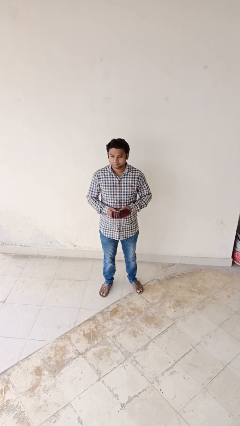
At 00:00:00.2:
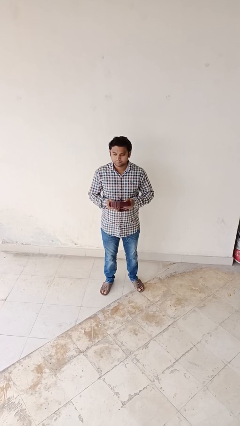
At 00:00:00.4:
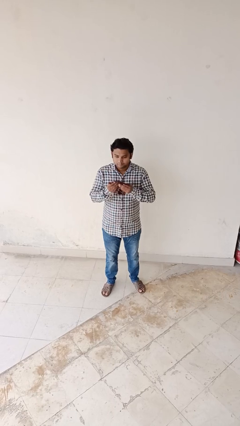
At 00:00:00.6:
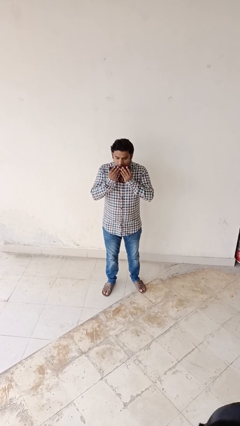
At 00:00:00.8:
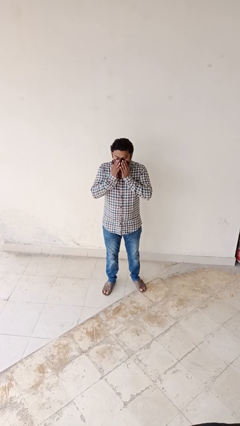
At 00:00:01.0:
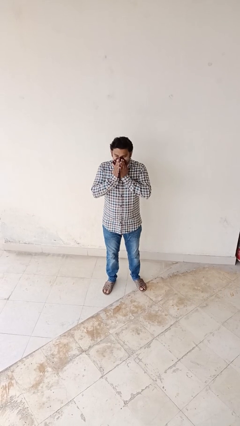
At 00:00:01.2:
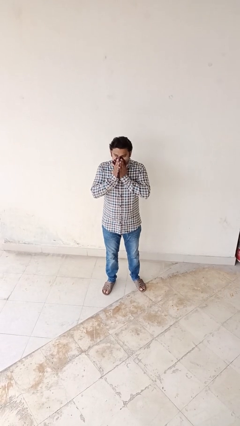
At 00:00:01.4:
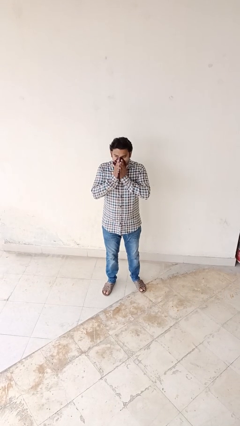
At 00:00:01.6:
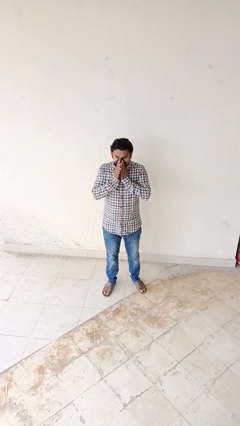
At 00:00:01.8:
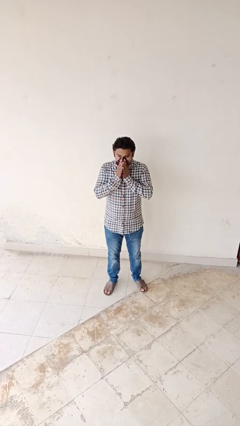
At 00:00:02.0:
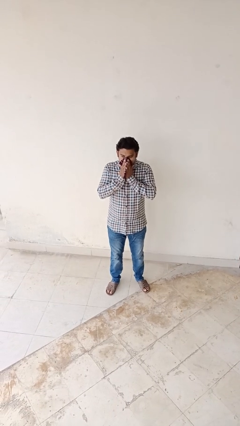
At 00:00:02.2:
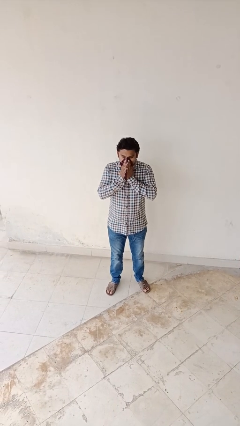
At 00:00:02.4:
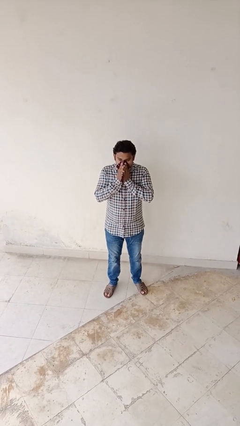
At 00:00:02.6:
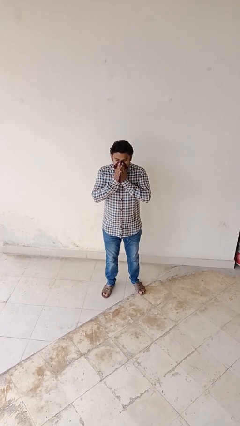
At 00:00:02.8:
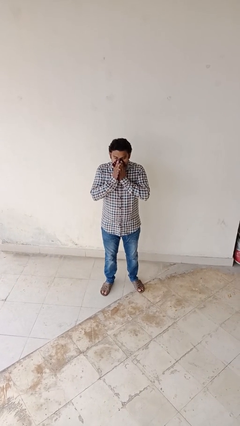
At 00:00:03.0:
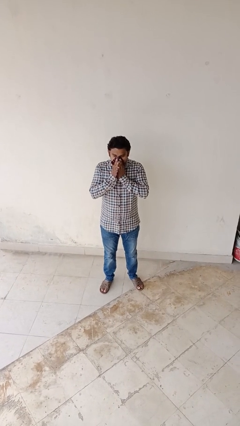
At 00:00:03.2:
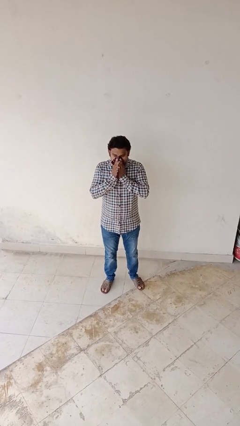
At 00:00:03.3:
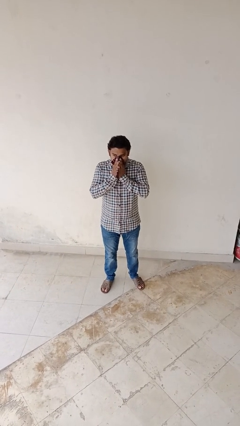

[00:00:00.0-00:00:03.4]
person blows nose

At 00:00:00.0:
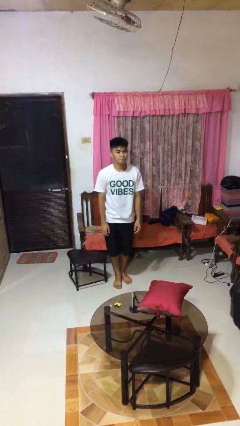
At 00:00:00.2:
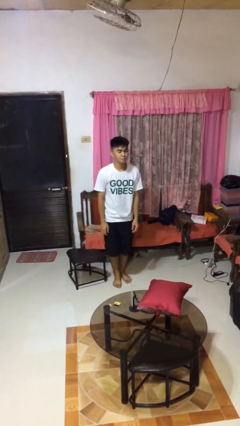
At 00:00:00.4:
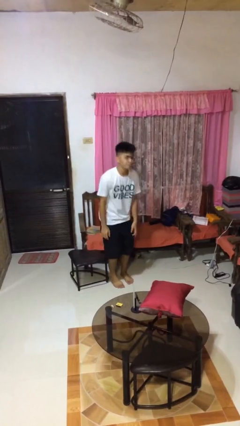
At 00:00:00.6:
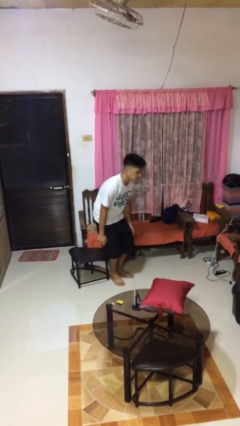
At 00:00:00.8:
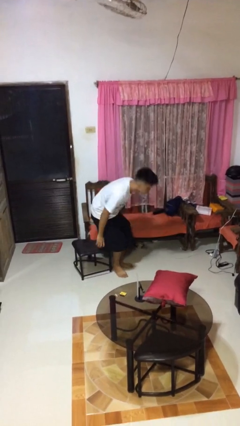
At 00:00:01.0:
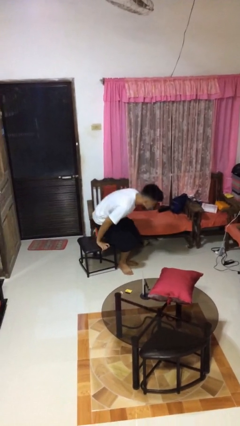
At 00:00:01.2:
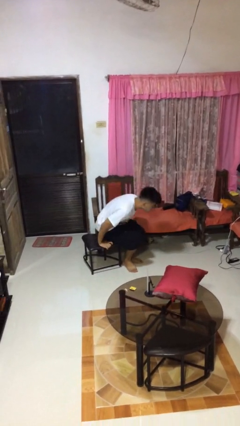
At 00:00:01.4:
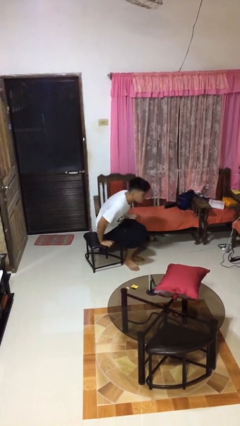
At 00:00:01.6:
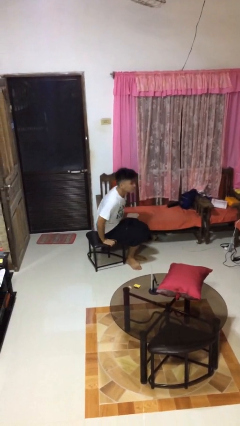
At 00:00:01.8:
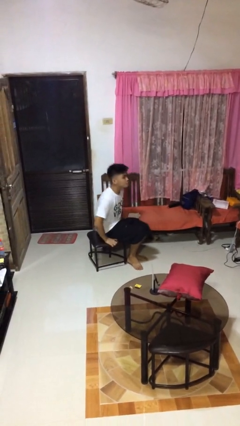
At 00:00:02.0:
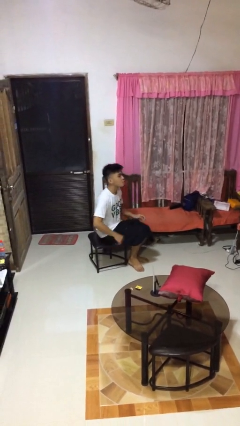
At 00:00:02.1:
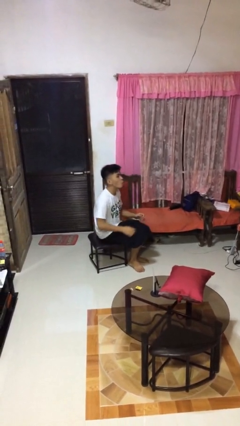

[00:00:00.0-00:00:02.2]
person sits down

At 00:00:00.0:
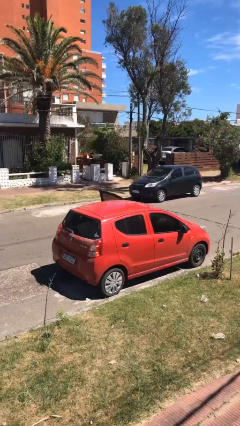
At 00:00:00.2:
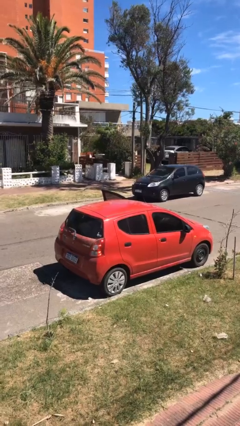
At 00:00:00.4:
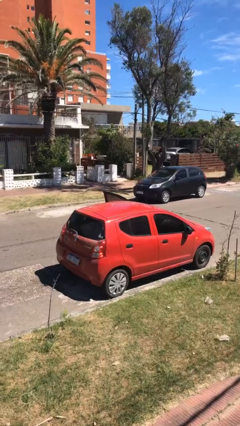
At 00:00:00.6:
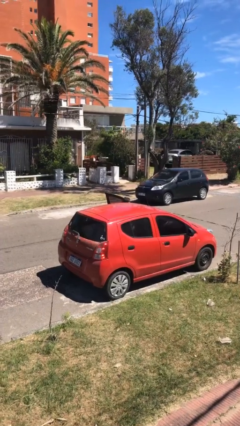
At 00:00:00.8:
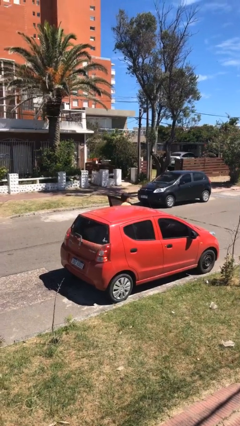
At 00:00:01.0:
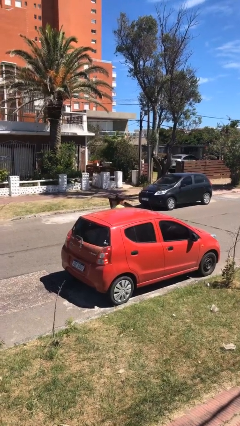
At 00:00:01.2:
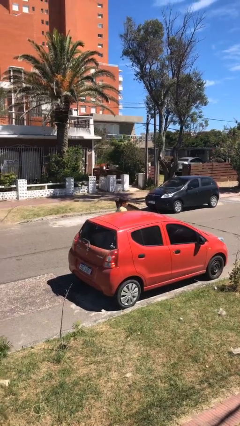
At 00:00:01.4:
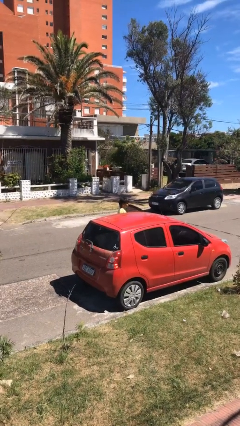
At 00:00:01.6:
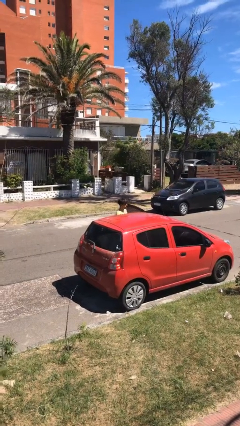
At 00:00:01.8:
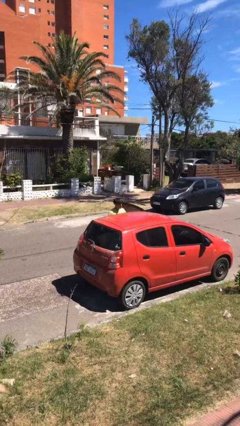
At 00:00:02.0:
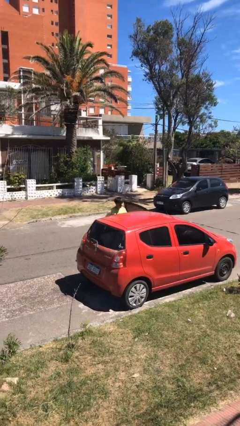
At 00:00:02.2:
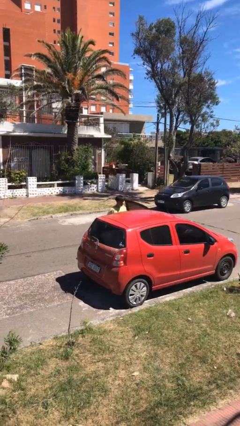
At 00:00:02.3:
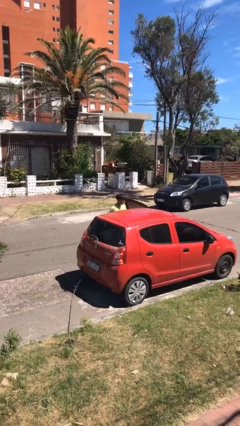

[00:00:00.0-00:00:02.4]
person exits car

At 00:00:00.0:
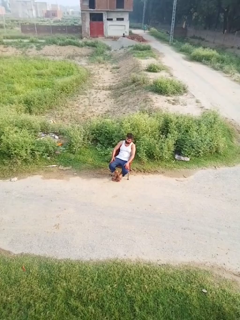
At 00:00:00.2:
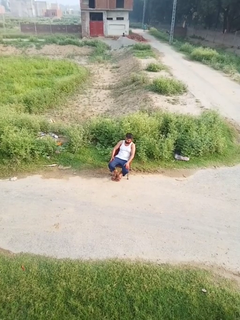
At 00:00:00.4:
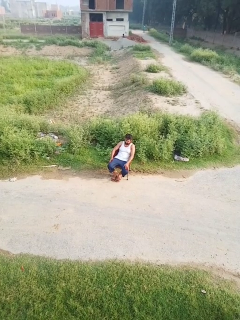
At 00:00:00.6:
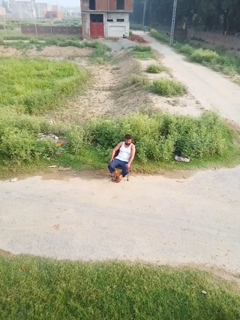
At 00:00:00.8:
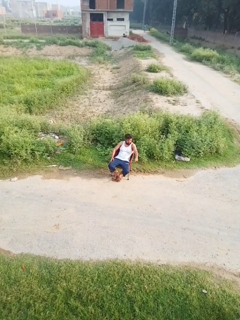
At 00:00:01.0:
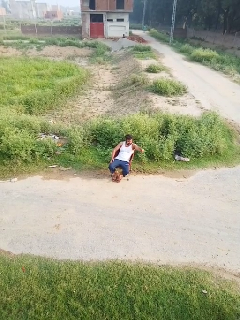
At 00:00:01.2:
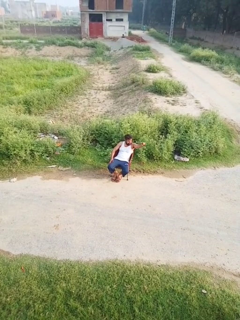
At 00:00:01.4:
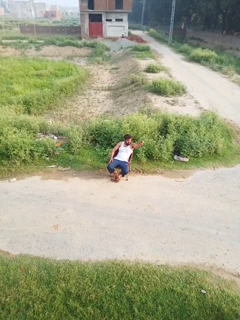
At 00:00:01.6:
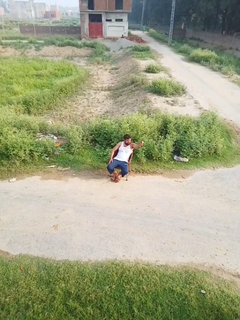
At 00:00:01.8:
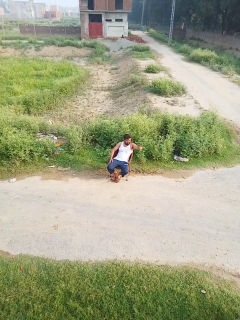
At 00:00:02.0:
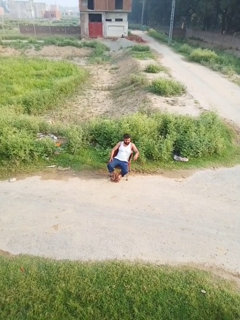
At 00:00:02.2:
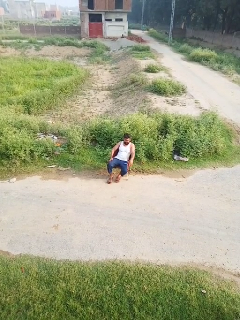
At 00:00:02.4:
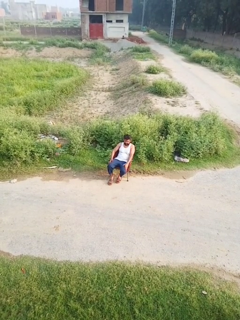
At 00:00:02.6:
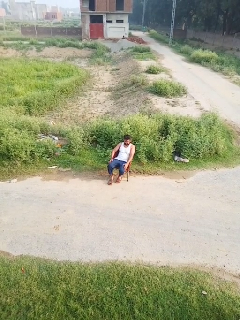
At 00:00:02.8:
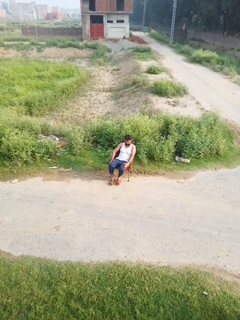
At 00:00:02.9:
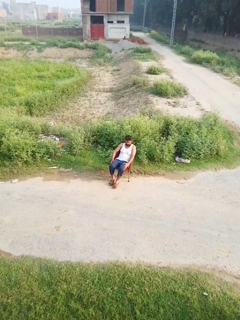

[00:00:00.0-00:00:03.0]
person points at person

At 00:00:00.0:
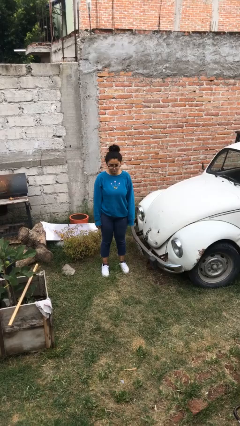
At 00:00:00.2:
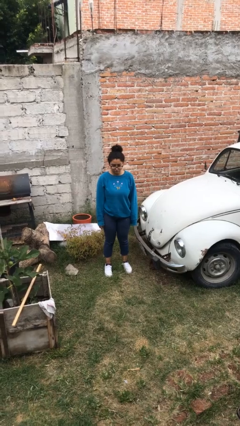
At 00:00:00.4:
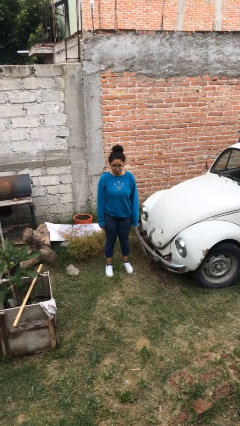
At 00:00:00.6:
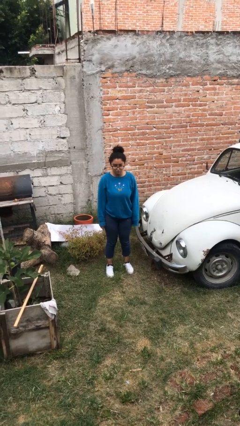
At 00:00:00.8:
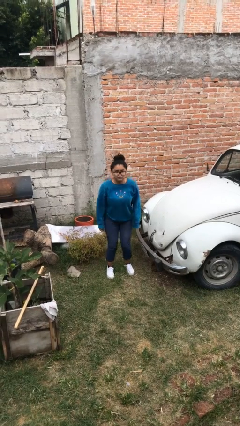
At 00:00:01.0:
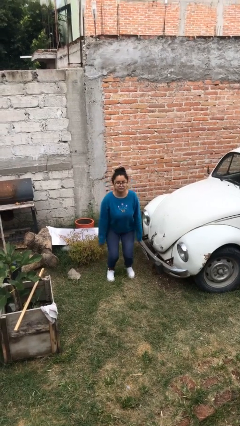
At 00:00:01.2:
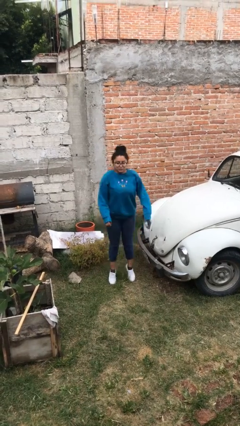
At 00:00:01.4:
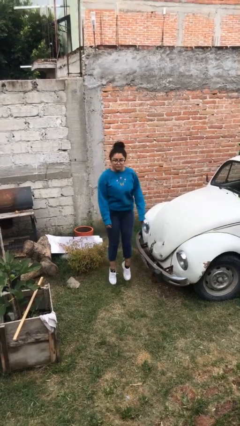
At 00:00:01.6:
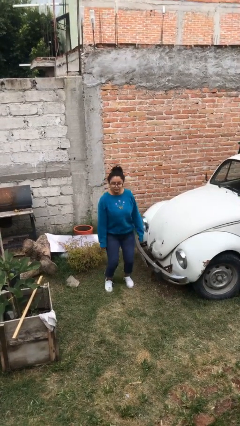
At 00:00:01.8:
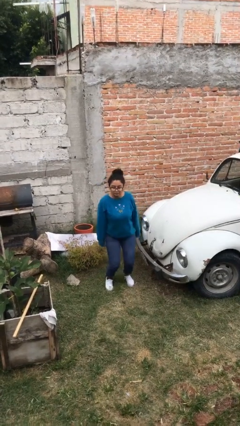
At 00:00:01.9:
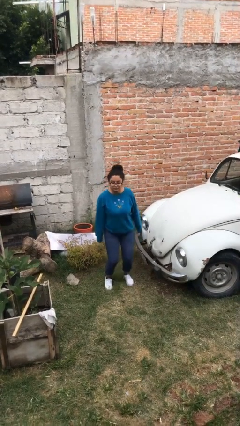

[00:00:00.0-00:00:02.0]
person jumps

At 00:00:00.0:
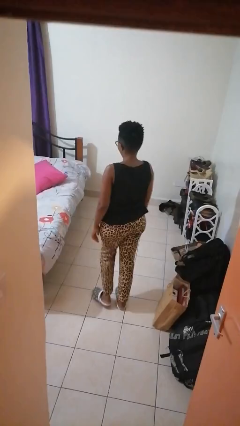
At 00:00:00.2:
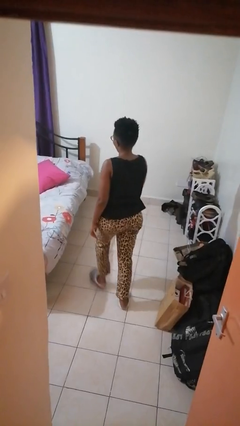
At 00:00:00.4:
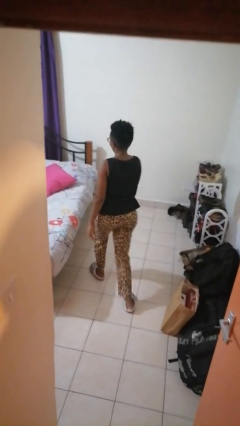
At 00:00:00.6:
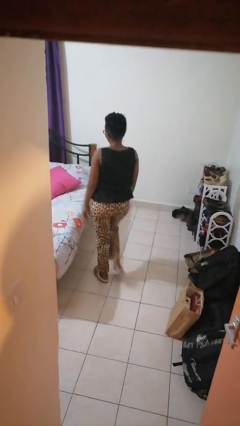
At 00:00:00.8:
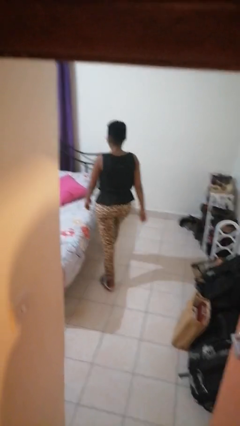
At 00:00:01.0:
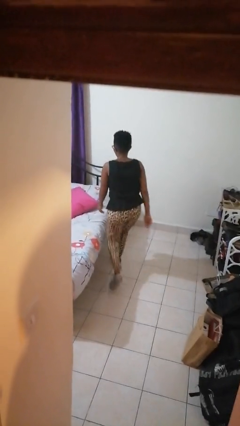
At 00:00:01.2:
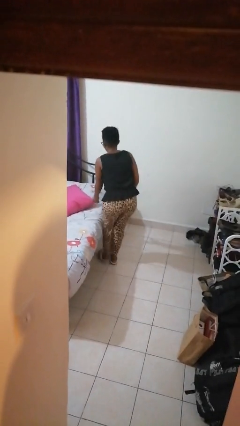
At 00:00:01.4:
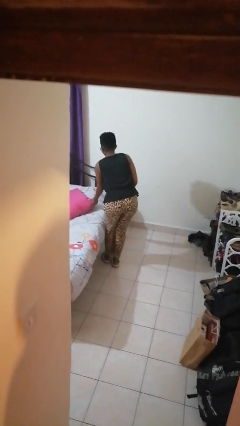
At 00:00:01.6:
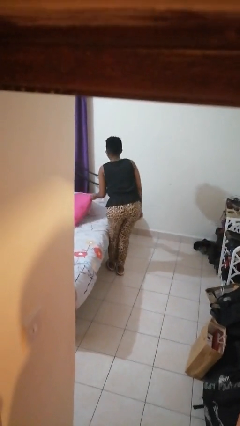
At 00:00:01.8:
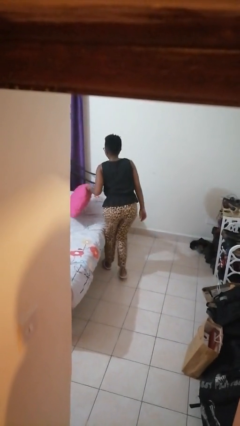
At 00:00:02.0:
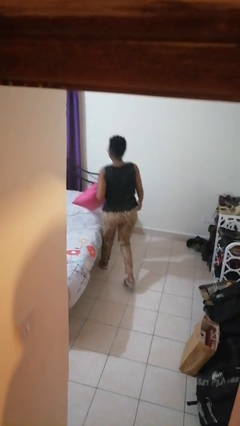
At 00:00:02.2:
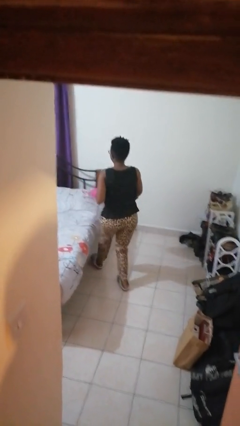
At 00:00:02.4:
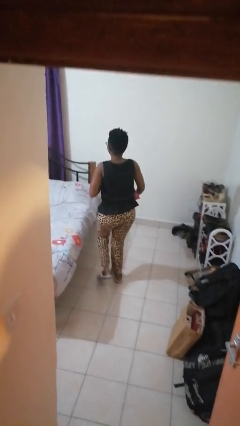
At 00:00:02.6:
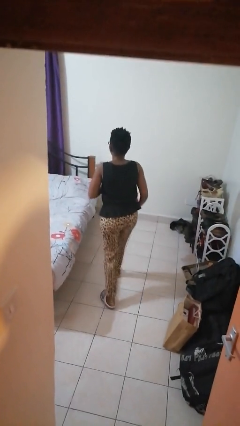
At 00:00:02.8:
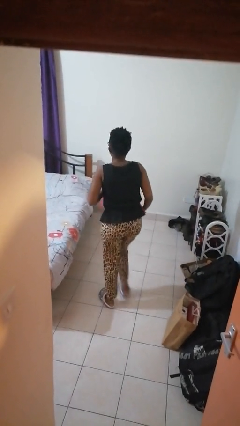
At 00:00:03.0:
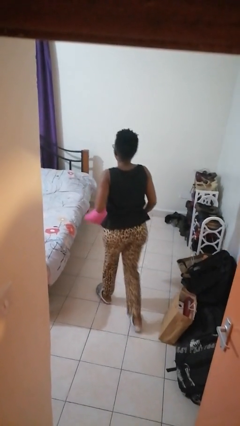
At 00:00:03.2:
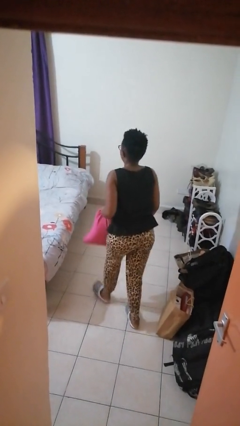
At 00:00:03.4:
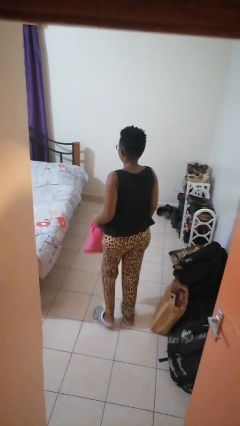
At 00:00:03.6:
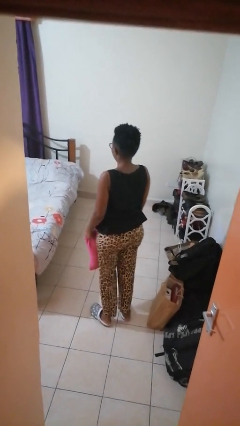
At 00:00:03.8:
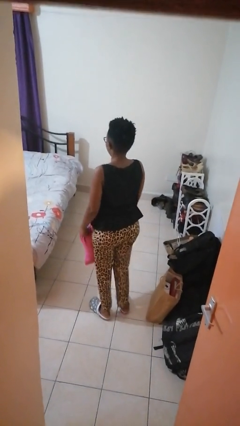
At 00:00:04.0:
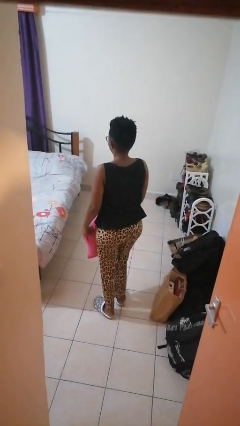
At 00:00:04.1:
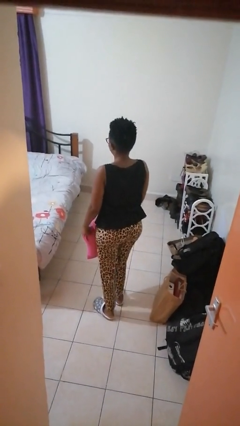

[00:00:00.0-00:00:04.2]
person picks up object from bed

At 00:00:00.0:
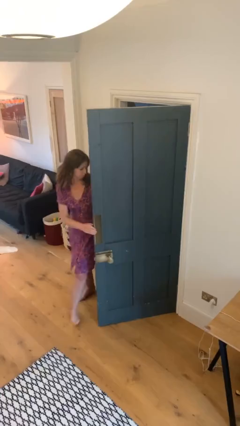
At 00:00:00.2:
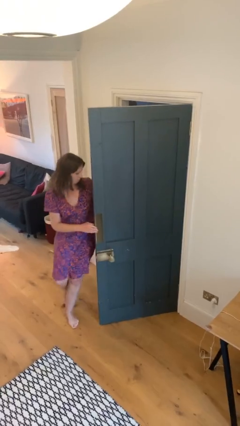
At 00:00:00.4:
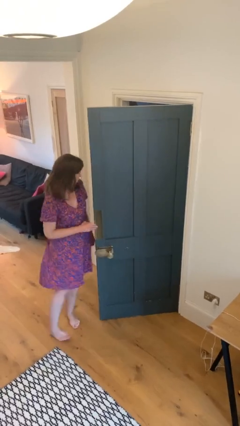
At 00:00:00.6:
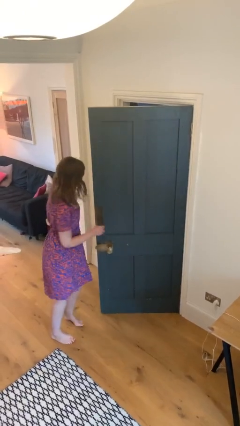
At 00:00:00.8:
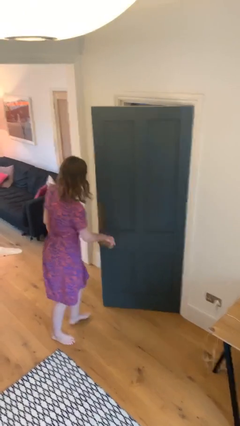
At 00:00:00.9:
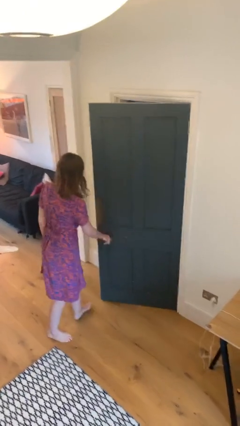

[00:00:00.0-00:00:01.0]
person enters scene through structure
